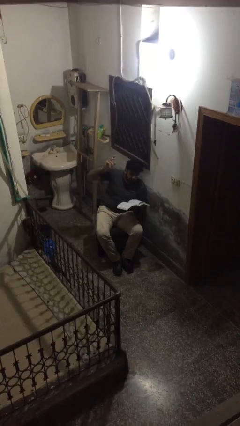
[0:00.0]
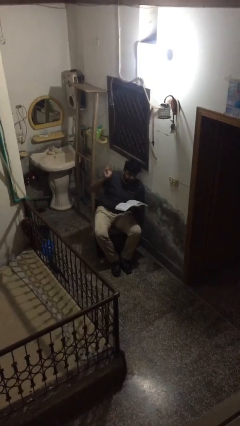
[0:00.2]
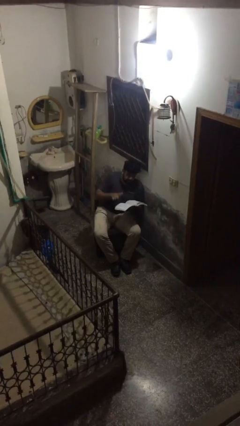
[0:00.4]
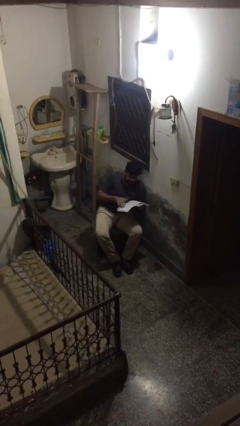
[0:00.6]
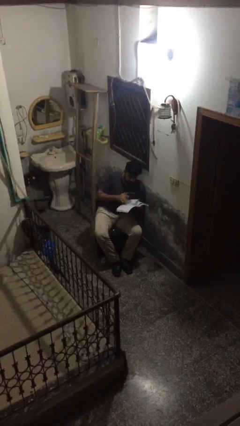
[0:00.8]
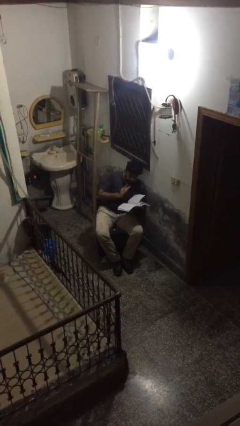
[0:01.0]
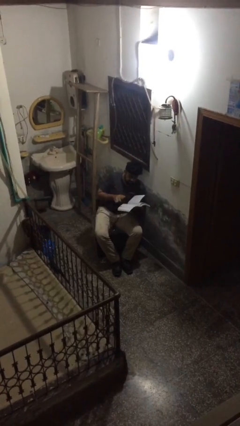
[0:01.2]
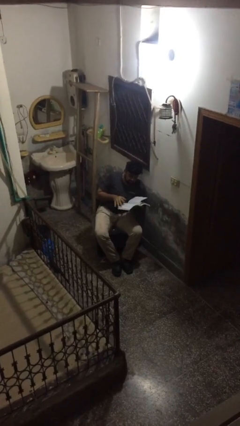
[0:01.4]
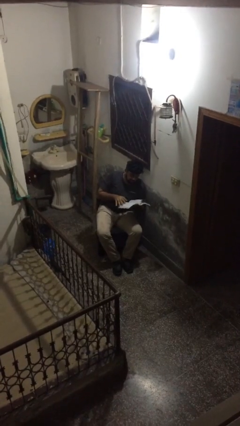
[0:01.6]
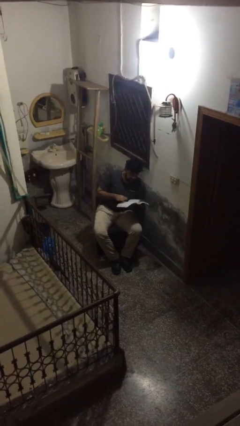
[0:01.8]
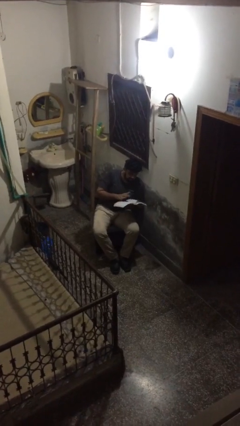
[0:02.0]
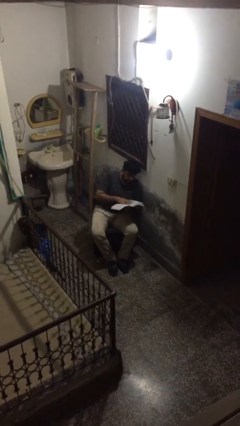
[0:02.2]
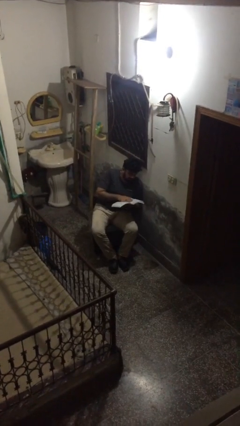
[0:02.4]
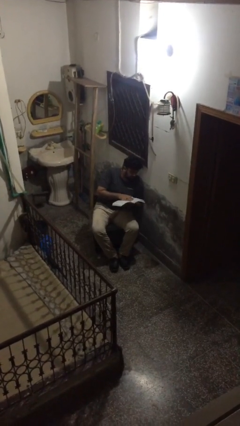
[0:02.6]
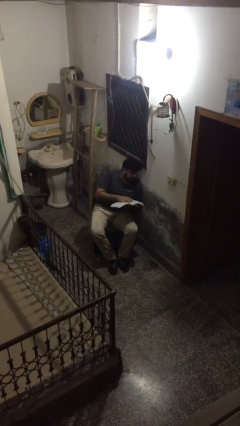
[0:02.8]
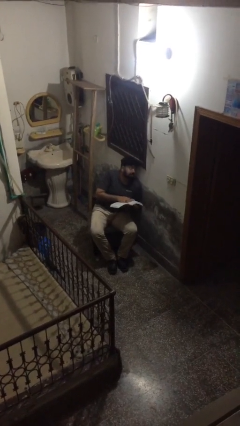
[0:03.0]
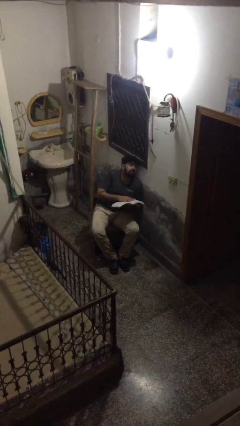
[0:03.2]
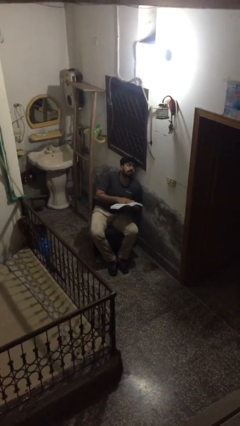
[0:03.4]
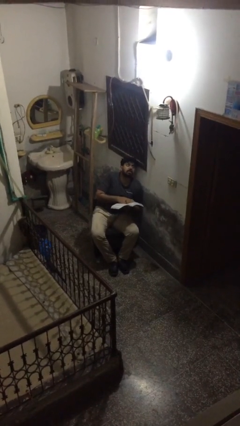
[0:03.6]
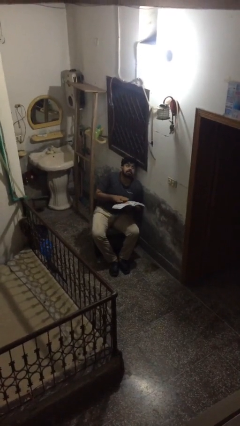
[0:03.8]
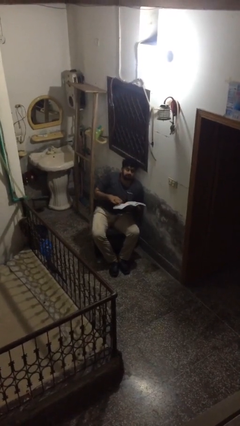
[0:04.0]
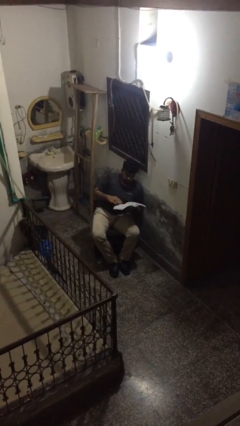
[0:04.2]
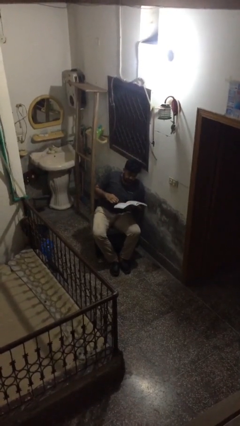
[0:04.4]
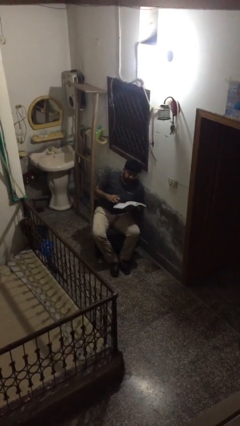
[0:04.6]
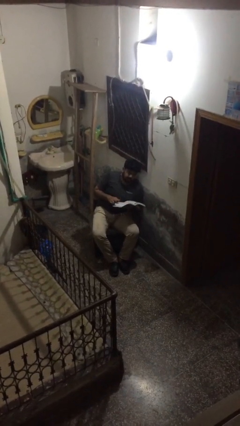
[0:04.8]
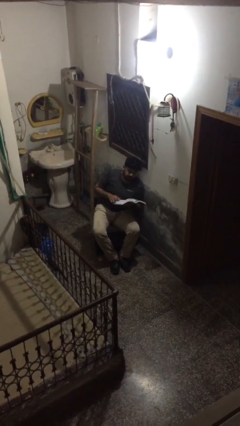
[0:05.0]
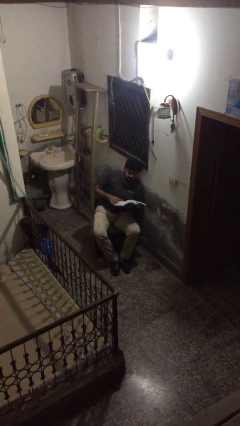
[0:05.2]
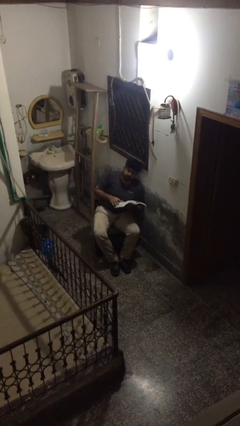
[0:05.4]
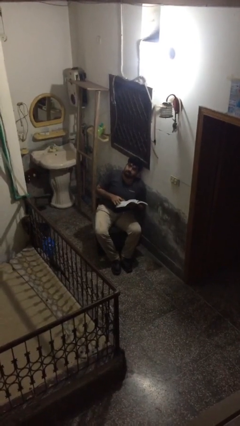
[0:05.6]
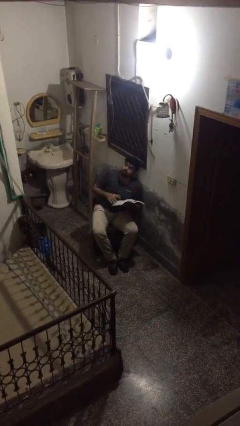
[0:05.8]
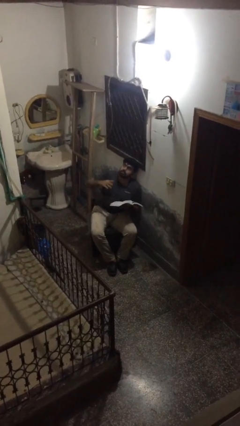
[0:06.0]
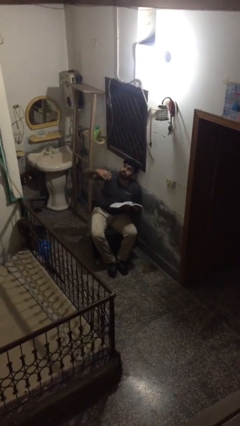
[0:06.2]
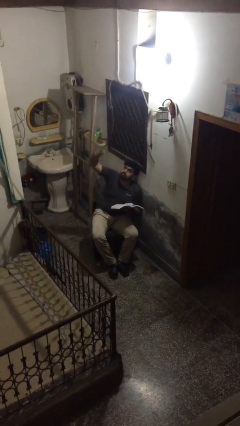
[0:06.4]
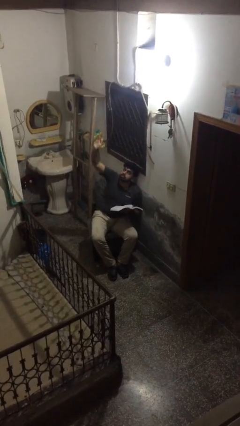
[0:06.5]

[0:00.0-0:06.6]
person reads document

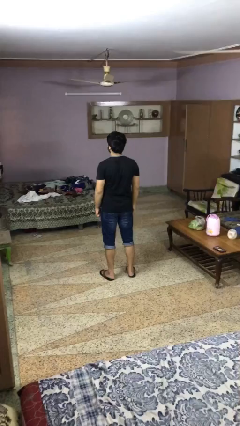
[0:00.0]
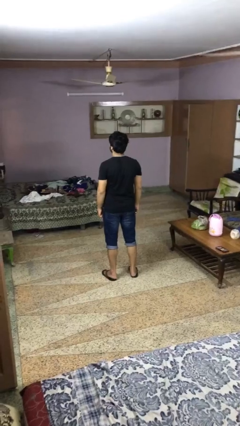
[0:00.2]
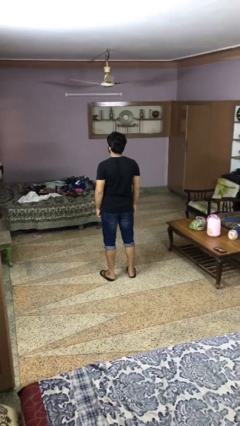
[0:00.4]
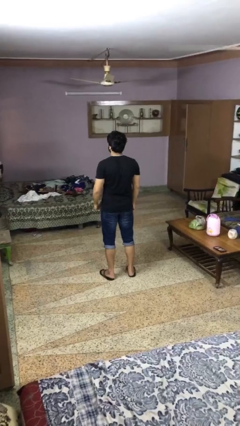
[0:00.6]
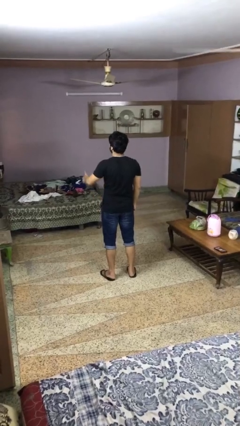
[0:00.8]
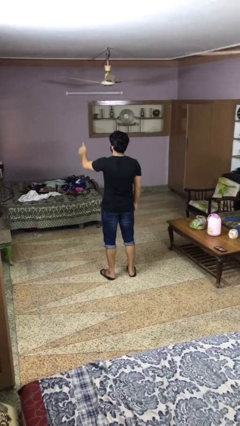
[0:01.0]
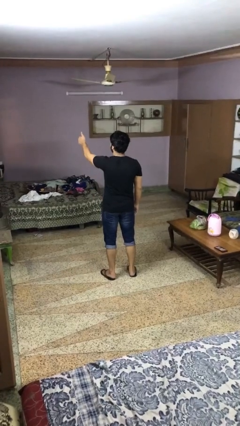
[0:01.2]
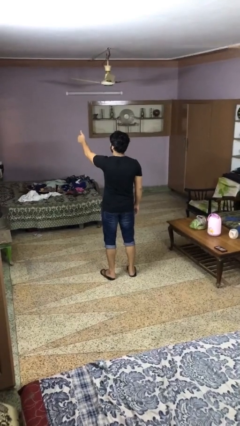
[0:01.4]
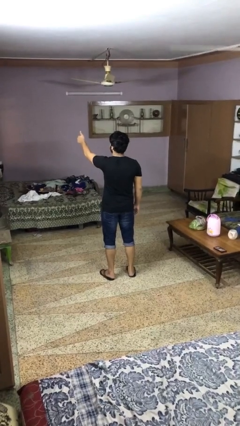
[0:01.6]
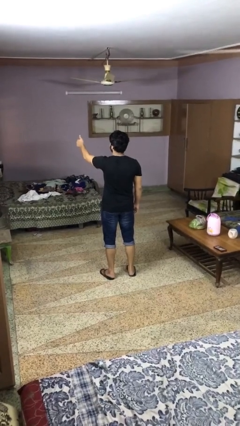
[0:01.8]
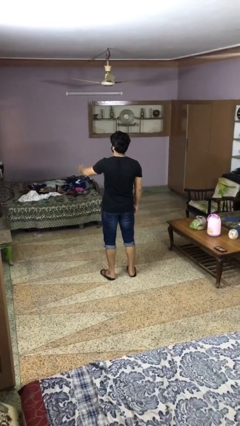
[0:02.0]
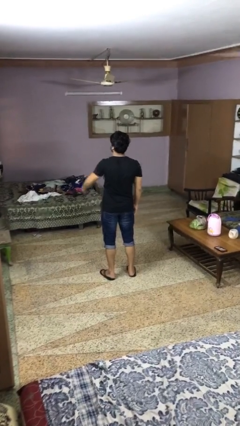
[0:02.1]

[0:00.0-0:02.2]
person gestures thumbs up

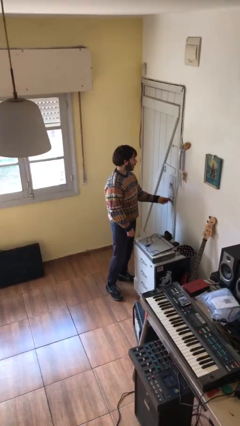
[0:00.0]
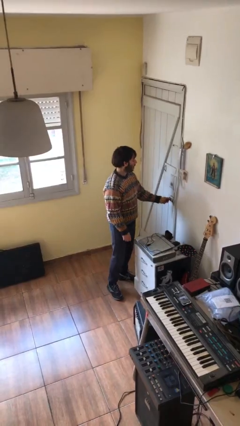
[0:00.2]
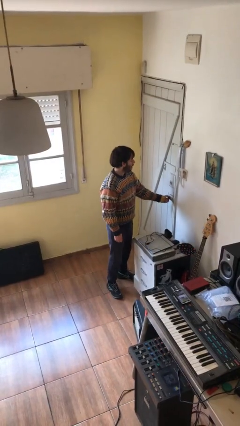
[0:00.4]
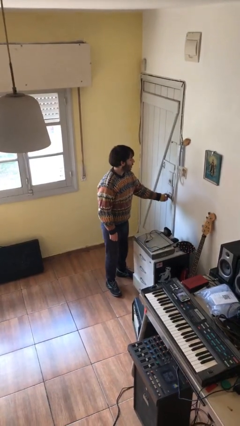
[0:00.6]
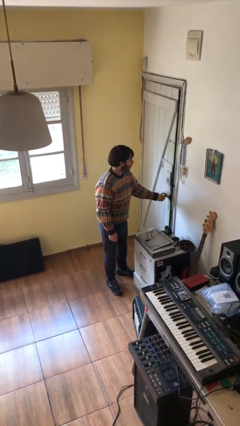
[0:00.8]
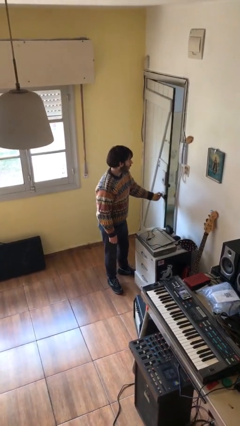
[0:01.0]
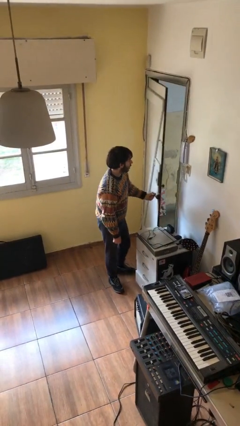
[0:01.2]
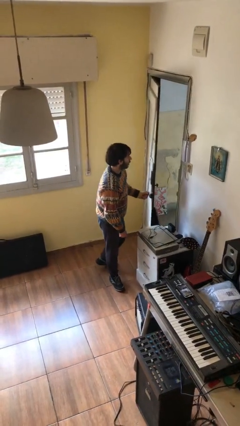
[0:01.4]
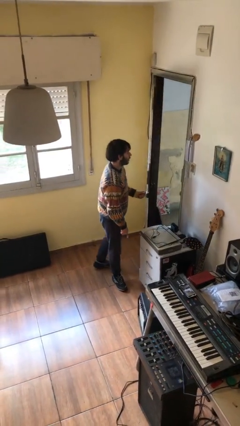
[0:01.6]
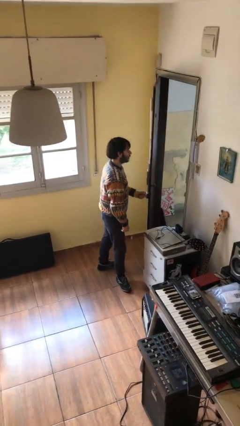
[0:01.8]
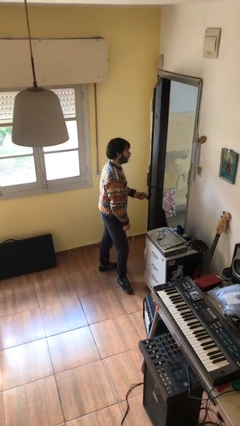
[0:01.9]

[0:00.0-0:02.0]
person opens facility door

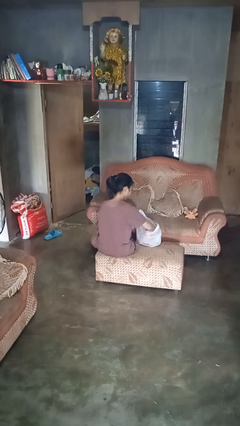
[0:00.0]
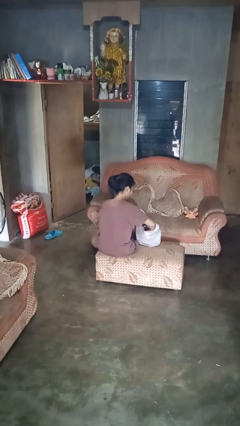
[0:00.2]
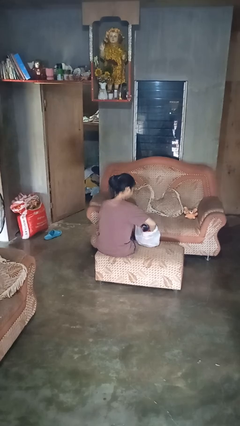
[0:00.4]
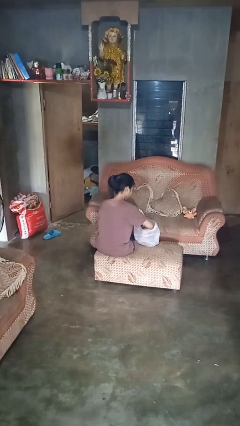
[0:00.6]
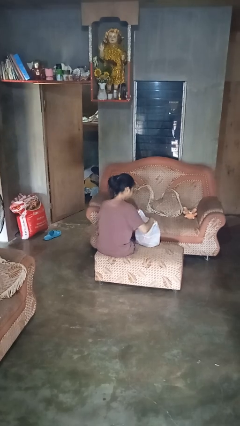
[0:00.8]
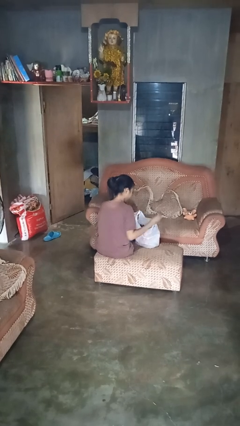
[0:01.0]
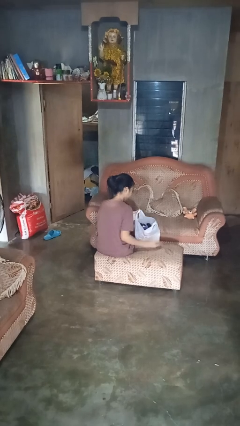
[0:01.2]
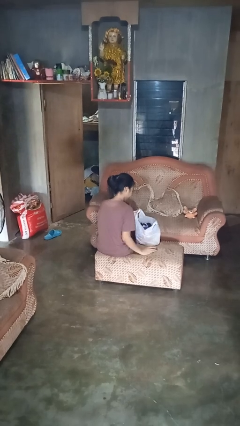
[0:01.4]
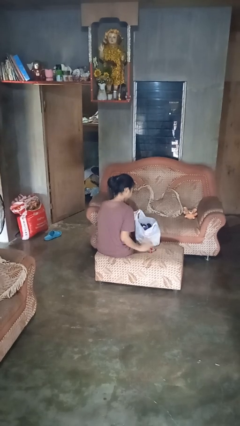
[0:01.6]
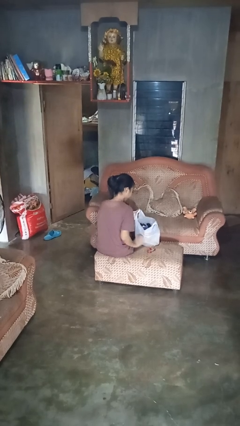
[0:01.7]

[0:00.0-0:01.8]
person takes object from bag

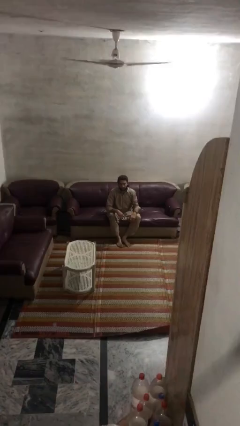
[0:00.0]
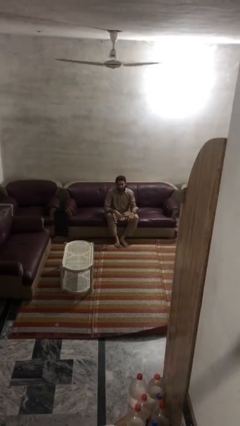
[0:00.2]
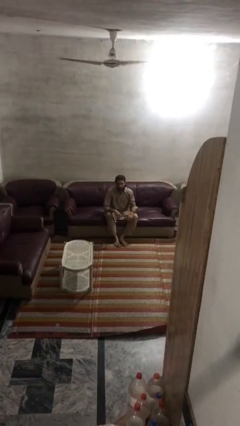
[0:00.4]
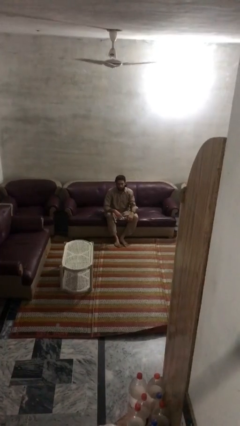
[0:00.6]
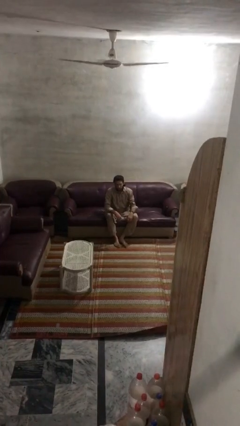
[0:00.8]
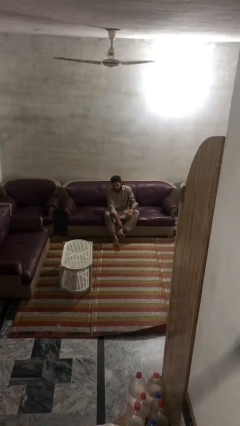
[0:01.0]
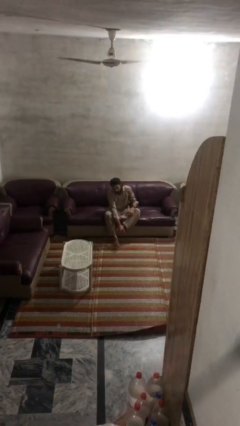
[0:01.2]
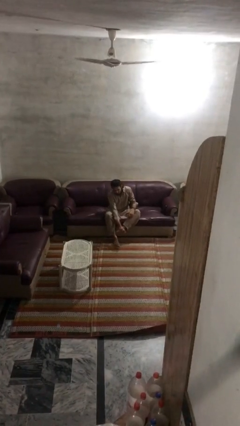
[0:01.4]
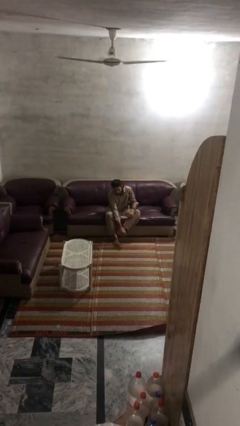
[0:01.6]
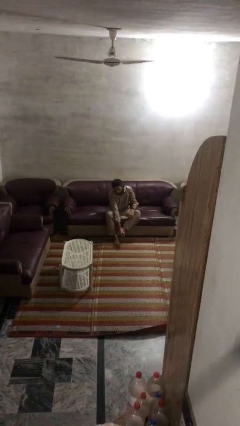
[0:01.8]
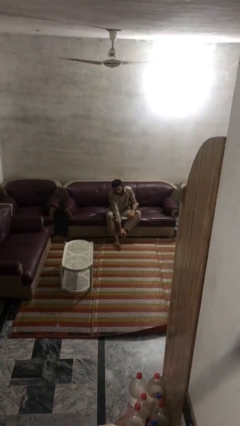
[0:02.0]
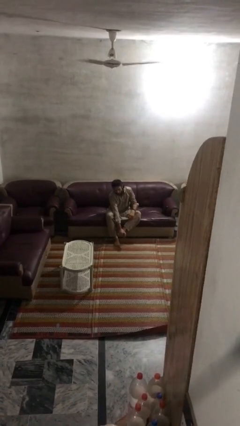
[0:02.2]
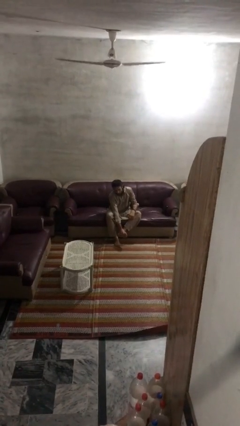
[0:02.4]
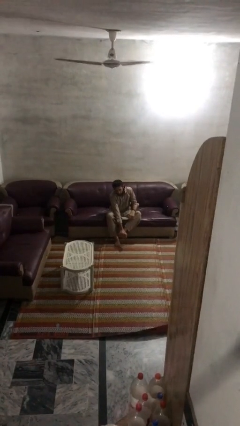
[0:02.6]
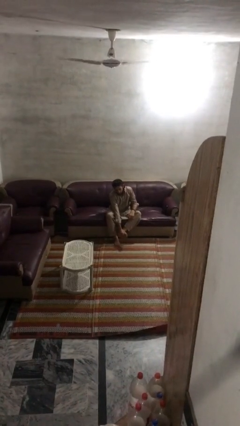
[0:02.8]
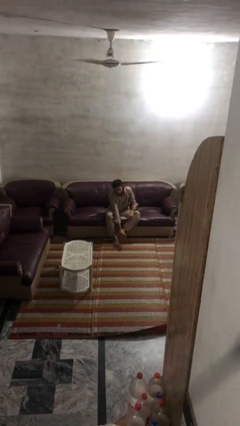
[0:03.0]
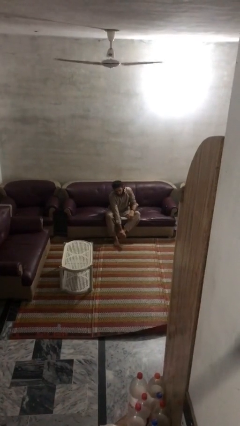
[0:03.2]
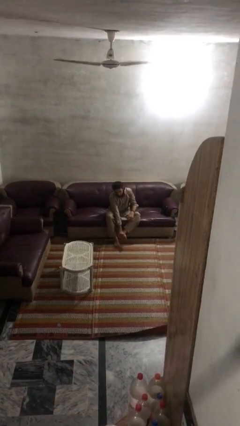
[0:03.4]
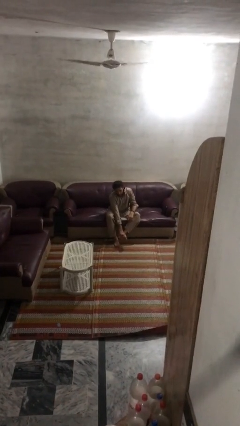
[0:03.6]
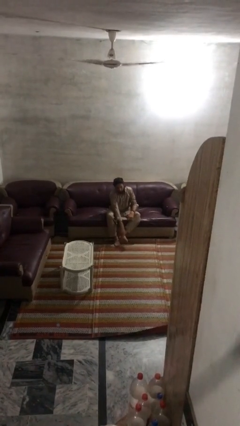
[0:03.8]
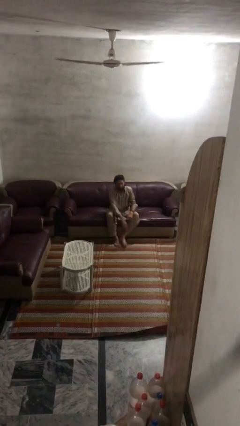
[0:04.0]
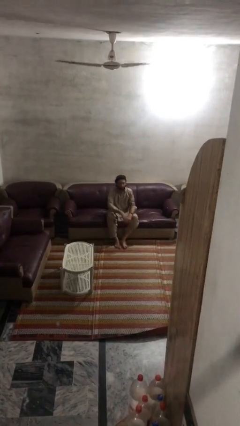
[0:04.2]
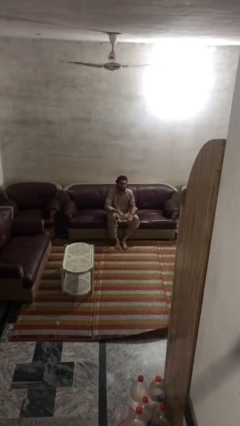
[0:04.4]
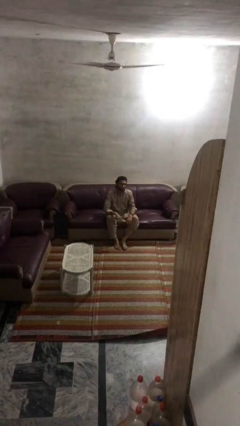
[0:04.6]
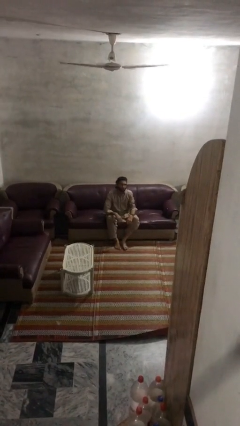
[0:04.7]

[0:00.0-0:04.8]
person rubs foot

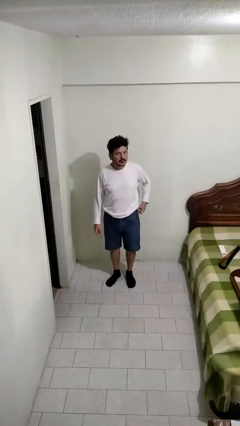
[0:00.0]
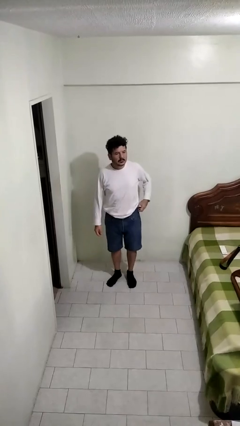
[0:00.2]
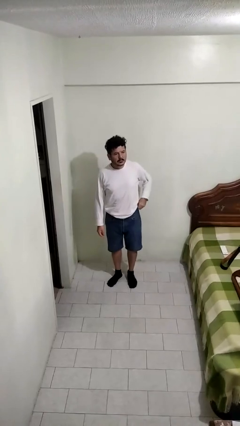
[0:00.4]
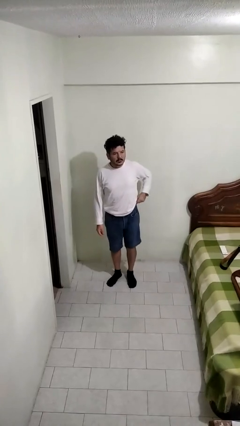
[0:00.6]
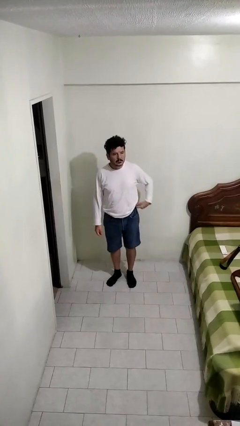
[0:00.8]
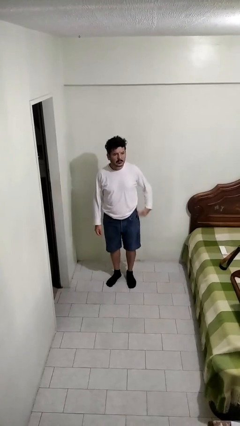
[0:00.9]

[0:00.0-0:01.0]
person hikes up pants
